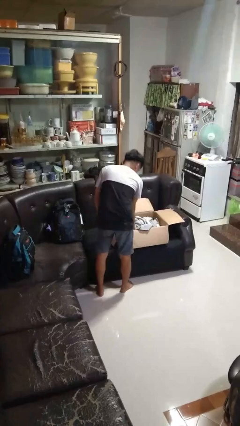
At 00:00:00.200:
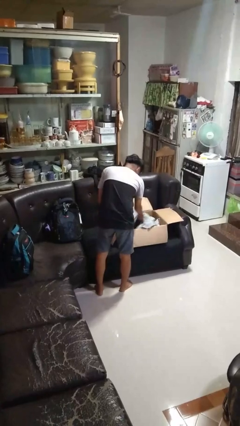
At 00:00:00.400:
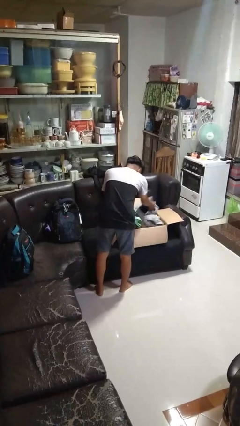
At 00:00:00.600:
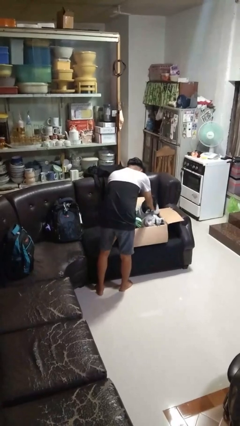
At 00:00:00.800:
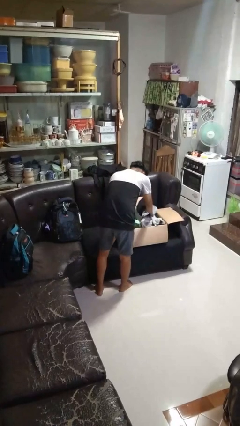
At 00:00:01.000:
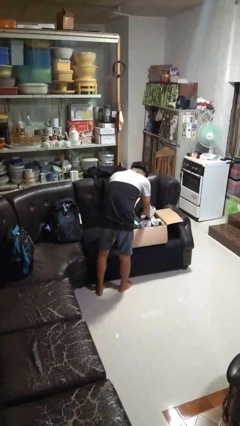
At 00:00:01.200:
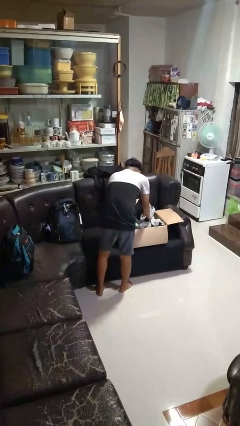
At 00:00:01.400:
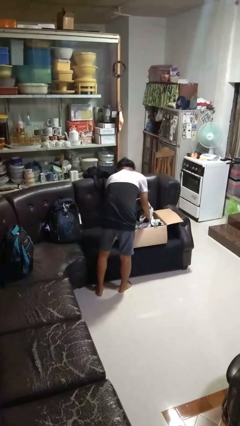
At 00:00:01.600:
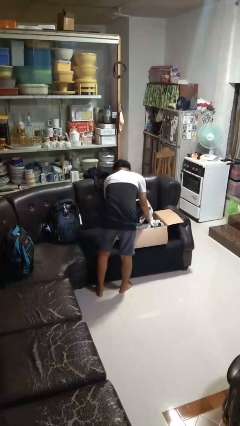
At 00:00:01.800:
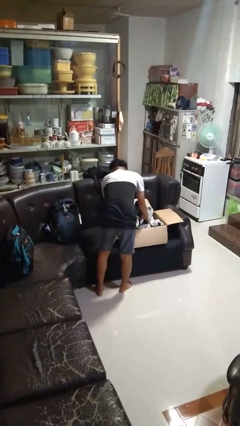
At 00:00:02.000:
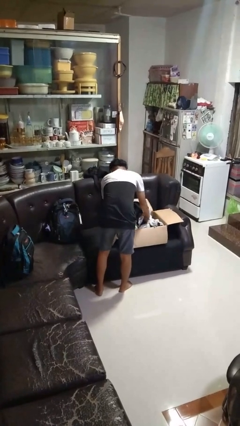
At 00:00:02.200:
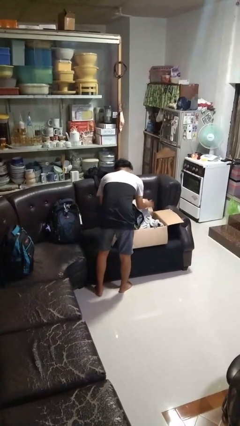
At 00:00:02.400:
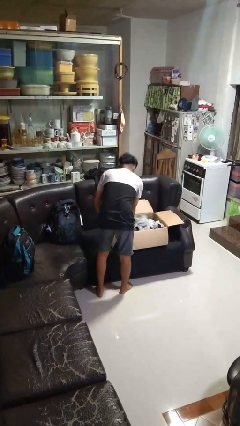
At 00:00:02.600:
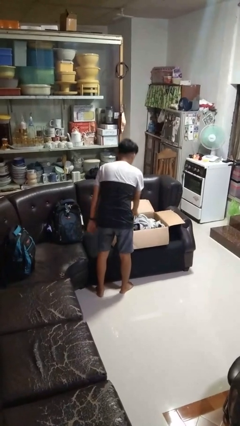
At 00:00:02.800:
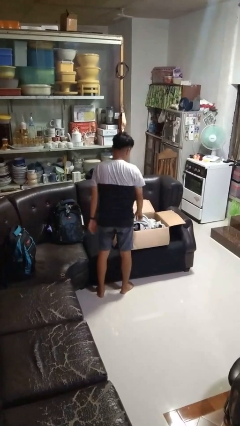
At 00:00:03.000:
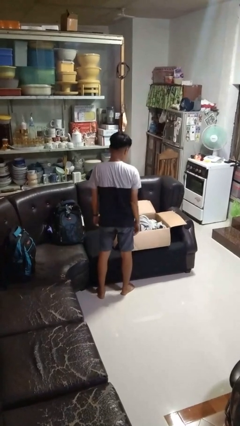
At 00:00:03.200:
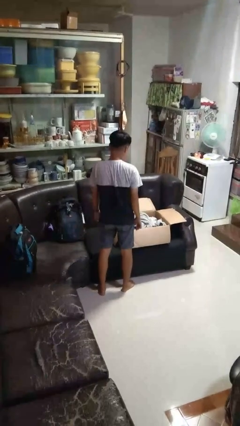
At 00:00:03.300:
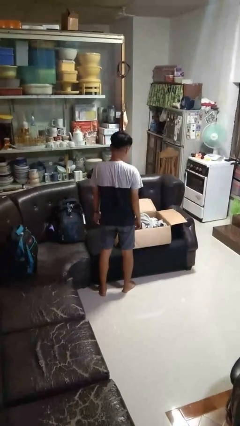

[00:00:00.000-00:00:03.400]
person searches in box

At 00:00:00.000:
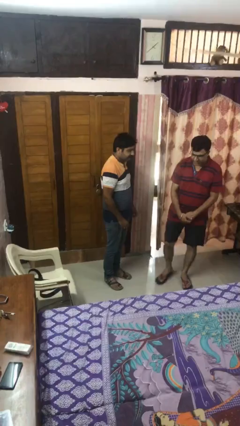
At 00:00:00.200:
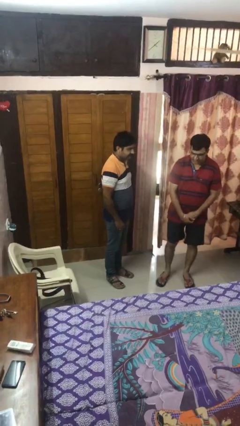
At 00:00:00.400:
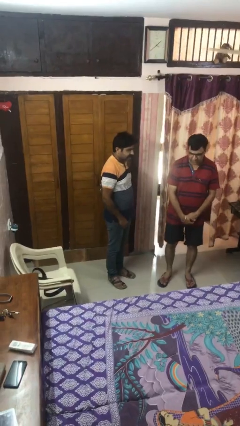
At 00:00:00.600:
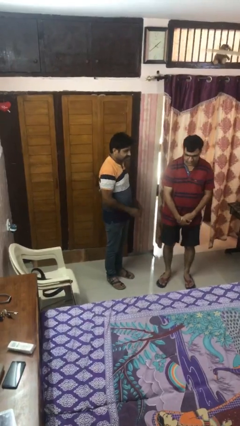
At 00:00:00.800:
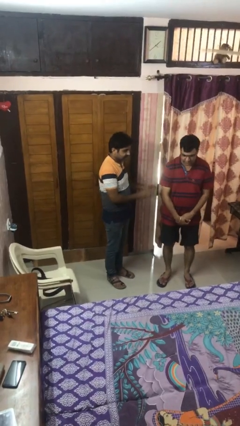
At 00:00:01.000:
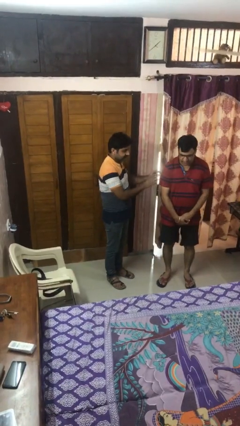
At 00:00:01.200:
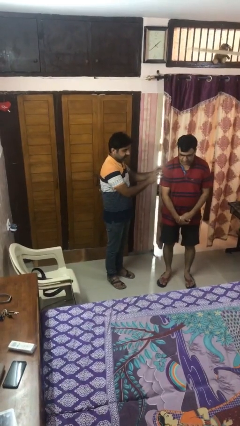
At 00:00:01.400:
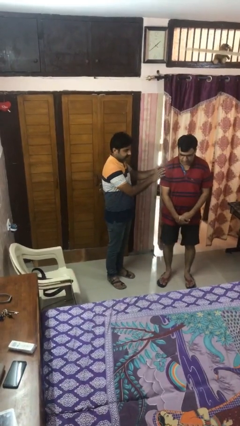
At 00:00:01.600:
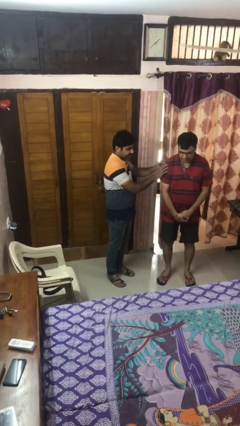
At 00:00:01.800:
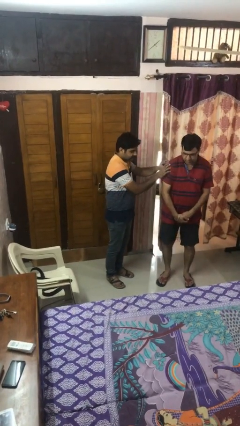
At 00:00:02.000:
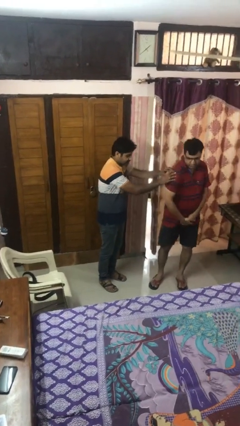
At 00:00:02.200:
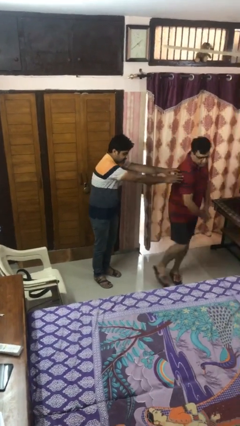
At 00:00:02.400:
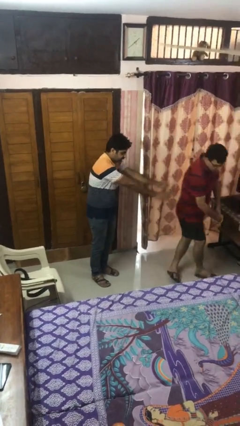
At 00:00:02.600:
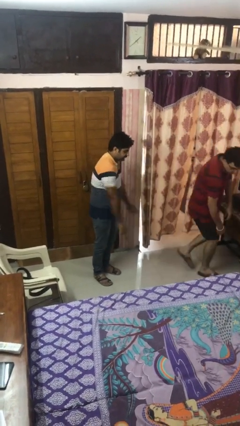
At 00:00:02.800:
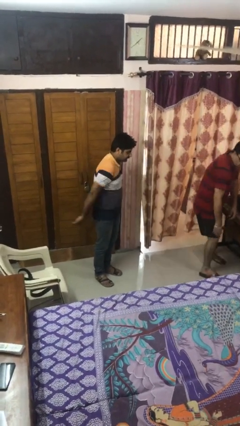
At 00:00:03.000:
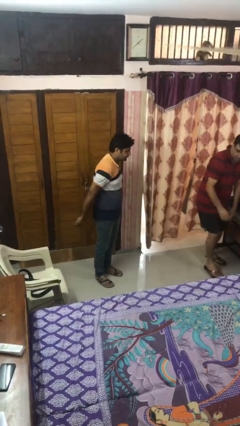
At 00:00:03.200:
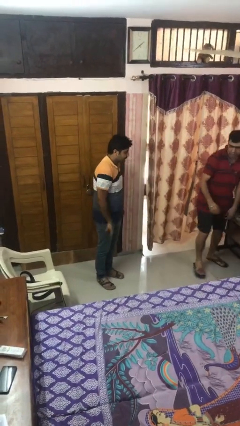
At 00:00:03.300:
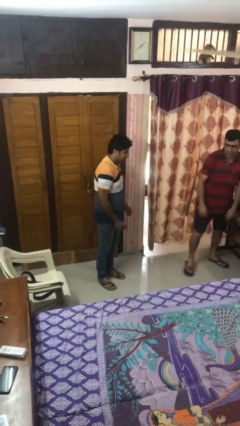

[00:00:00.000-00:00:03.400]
person shoves person

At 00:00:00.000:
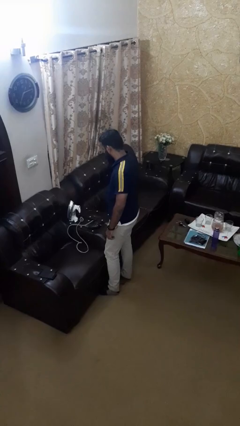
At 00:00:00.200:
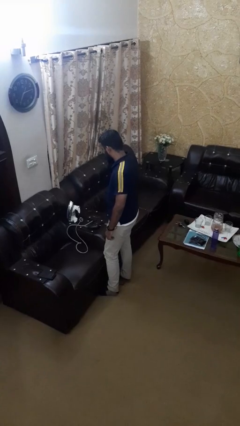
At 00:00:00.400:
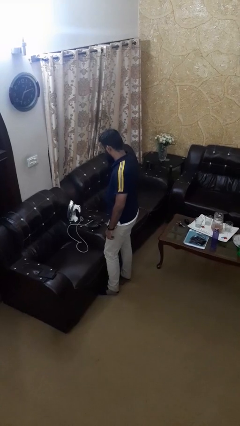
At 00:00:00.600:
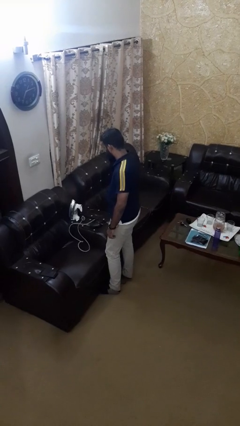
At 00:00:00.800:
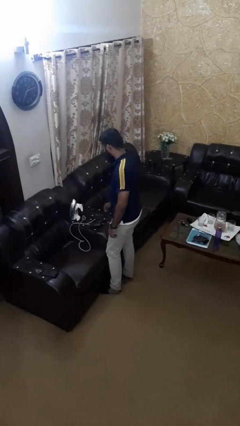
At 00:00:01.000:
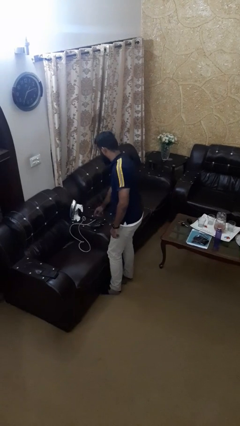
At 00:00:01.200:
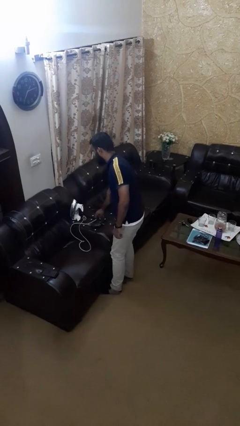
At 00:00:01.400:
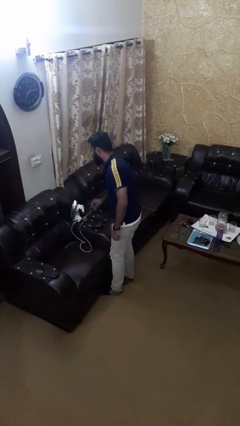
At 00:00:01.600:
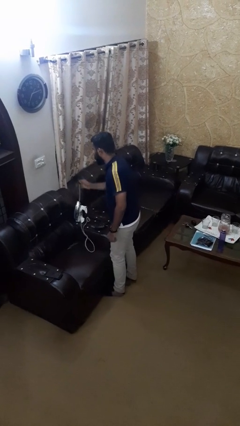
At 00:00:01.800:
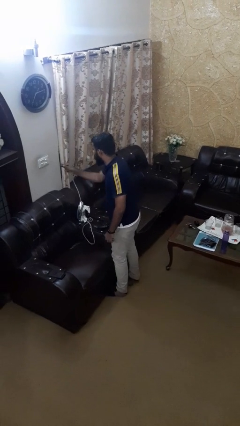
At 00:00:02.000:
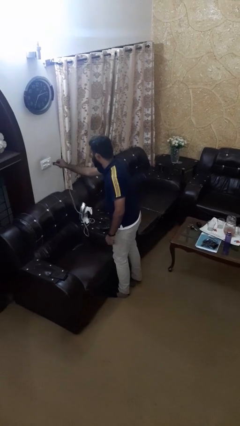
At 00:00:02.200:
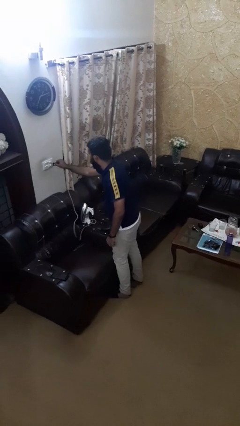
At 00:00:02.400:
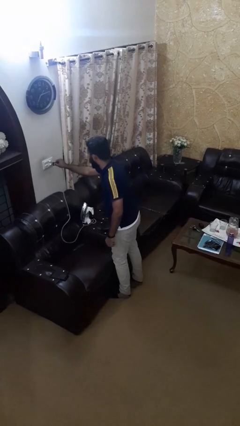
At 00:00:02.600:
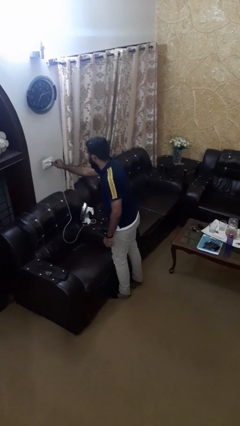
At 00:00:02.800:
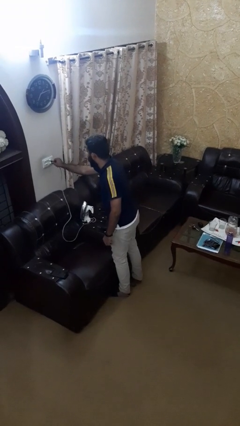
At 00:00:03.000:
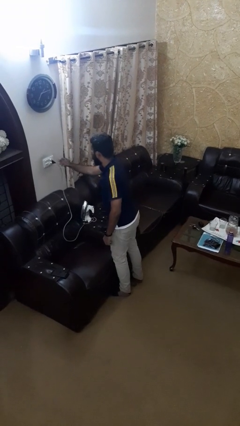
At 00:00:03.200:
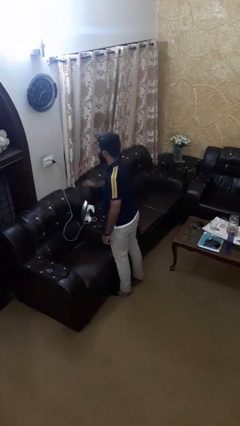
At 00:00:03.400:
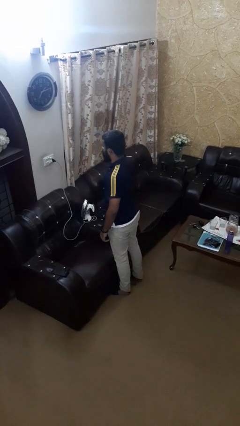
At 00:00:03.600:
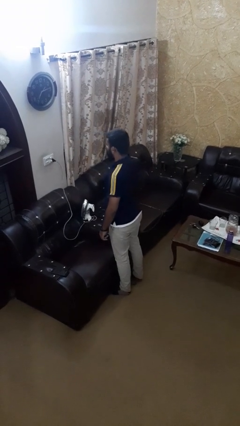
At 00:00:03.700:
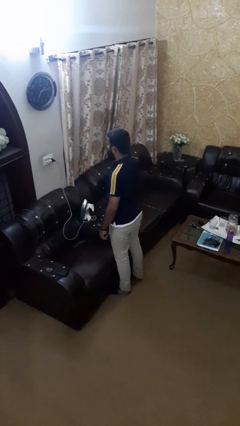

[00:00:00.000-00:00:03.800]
person plugs into electrical socket

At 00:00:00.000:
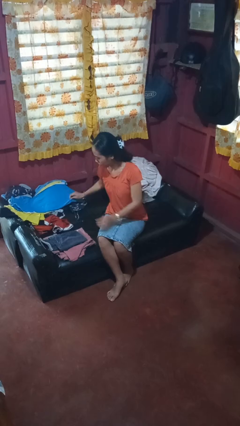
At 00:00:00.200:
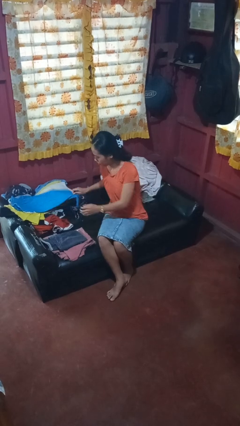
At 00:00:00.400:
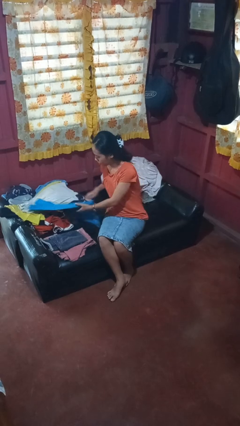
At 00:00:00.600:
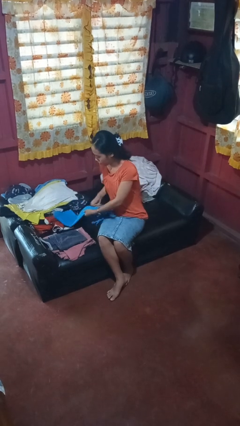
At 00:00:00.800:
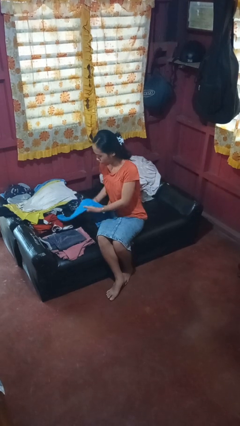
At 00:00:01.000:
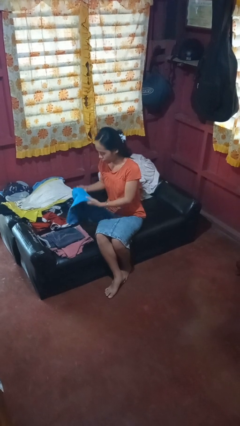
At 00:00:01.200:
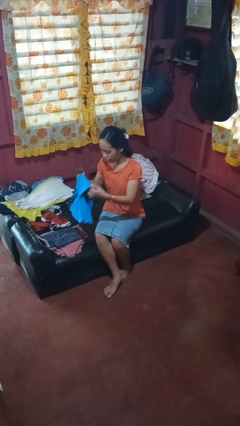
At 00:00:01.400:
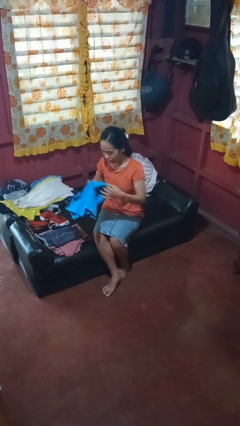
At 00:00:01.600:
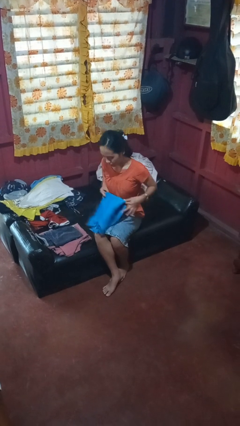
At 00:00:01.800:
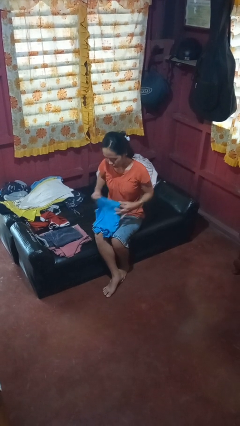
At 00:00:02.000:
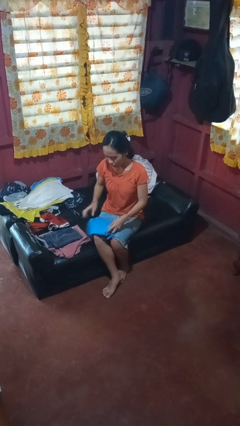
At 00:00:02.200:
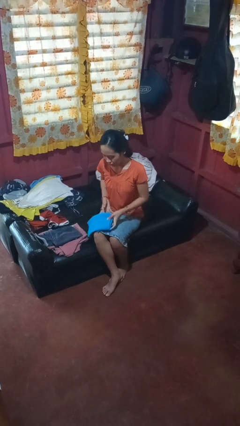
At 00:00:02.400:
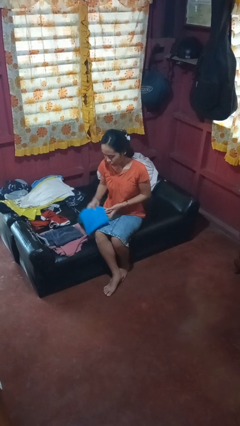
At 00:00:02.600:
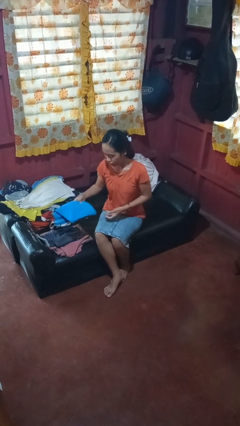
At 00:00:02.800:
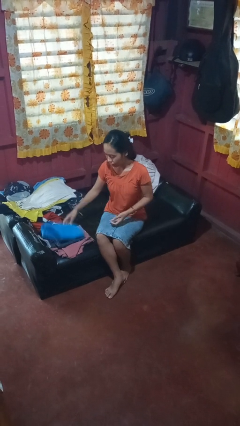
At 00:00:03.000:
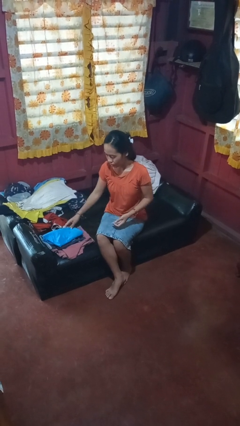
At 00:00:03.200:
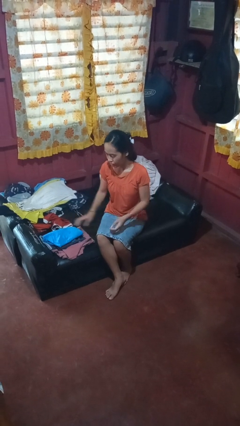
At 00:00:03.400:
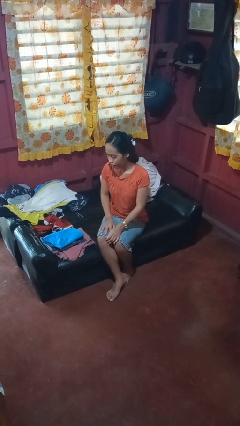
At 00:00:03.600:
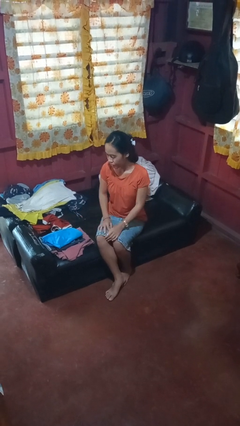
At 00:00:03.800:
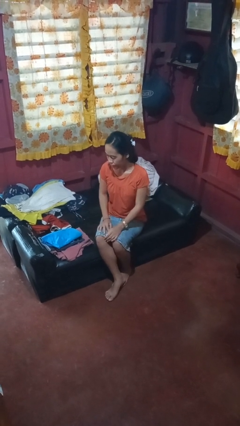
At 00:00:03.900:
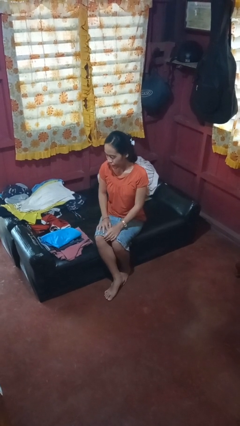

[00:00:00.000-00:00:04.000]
person folds shirt

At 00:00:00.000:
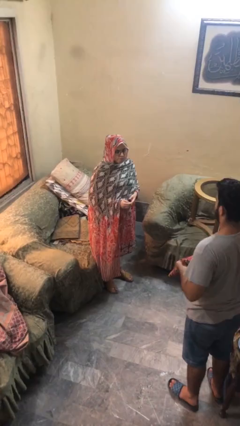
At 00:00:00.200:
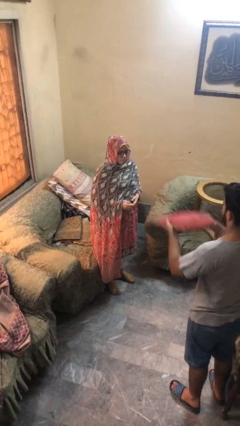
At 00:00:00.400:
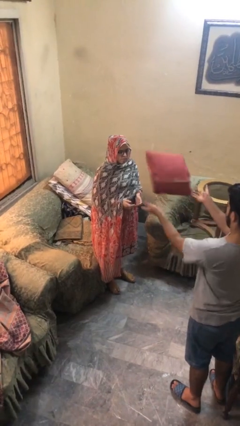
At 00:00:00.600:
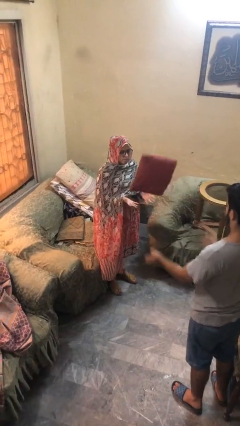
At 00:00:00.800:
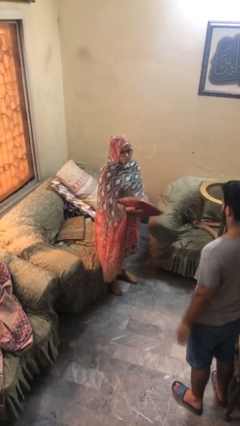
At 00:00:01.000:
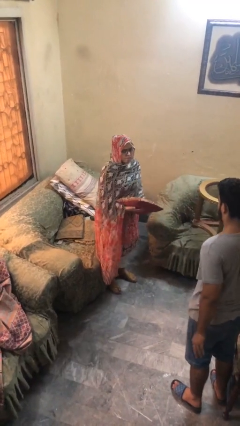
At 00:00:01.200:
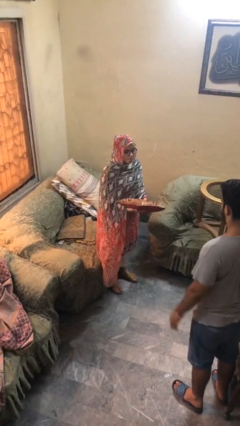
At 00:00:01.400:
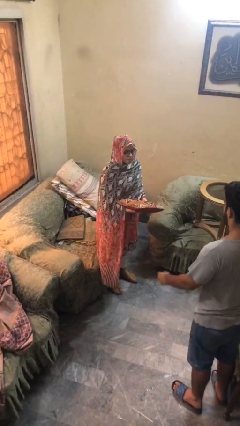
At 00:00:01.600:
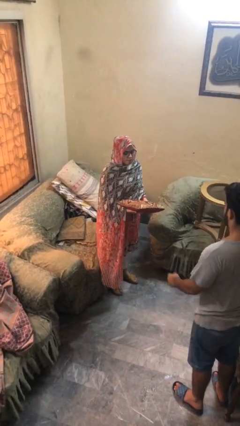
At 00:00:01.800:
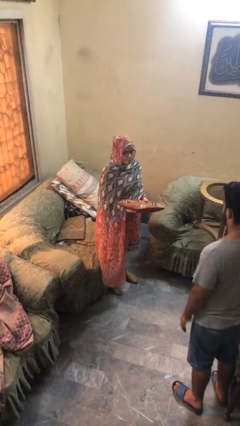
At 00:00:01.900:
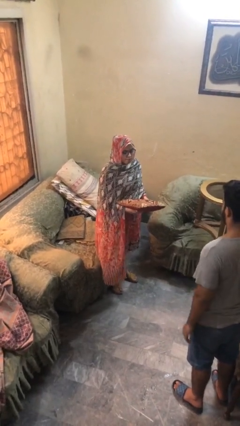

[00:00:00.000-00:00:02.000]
person catches object from person

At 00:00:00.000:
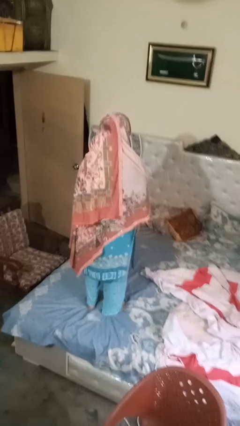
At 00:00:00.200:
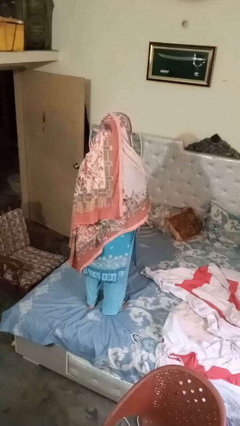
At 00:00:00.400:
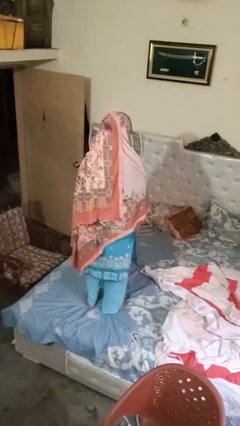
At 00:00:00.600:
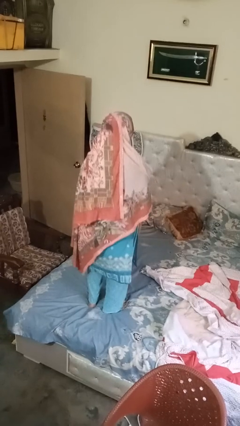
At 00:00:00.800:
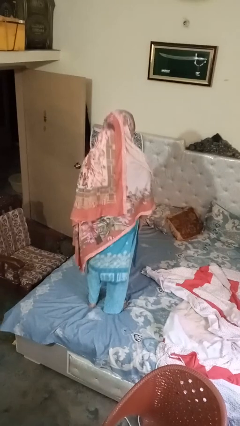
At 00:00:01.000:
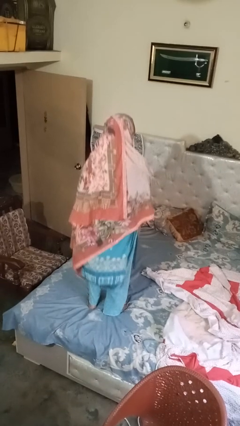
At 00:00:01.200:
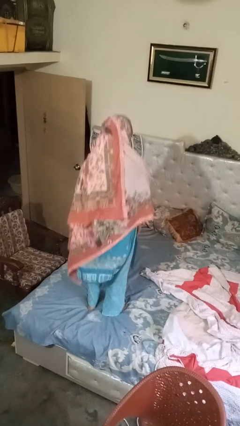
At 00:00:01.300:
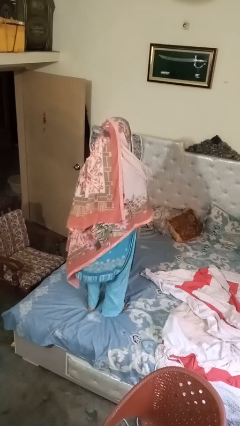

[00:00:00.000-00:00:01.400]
person jumps on bed
